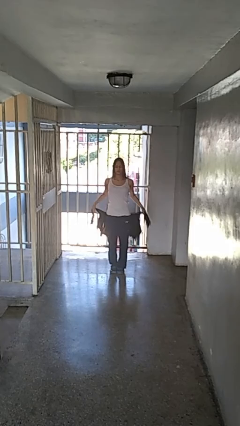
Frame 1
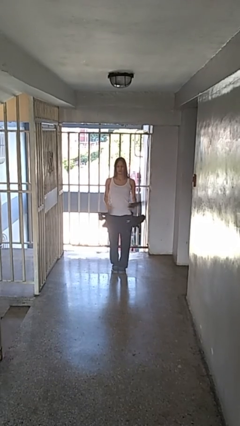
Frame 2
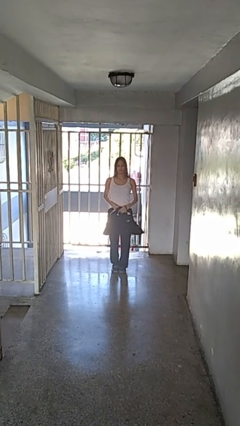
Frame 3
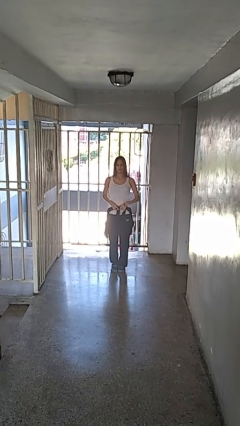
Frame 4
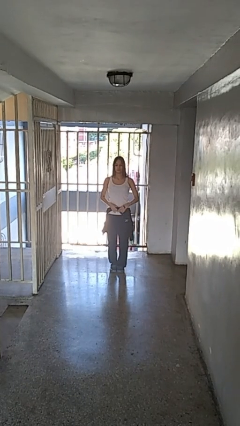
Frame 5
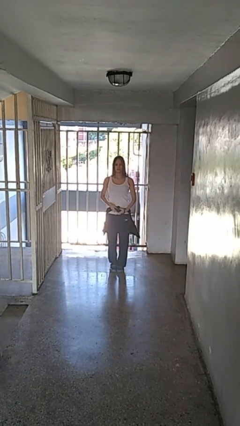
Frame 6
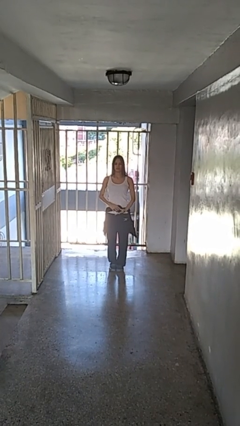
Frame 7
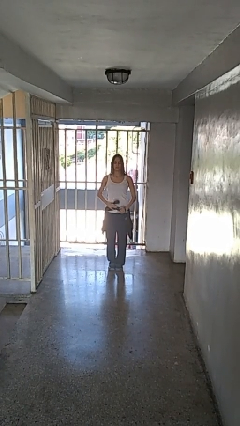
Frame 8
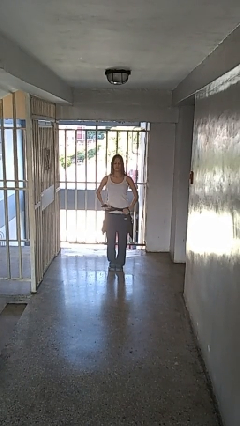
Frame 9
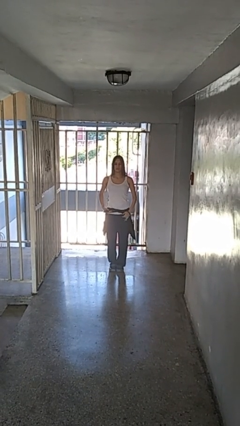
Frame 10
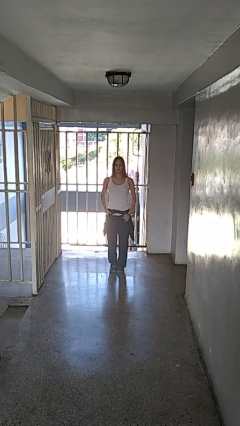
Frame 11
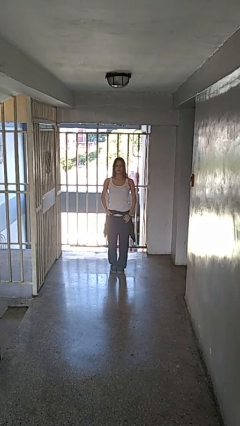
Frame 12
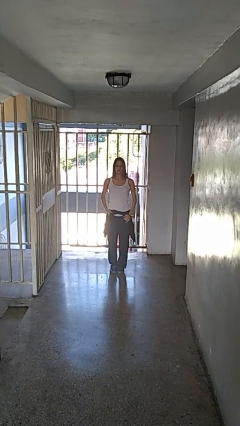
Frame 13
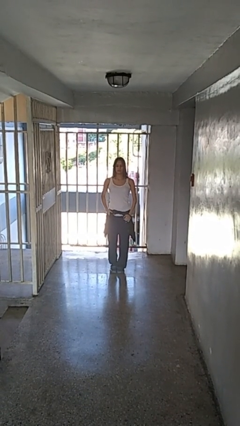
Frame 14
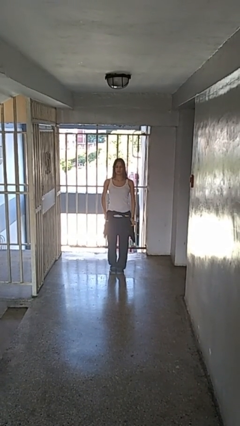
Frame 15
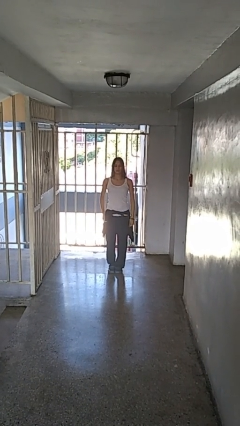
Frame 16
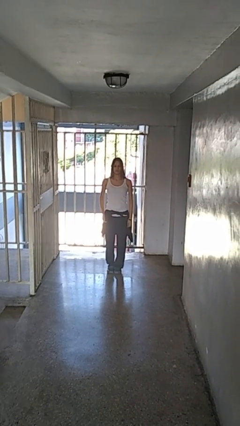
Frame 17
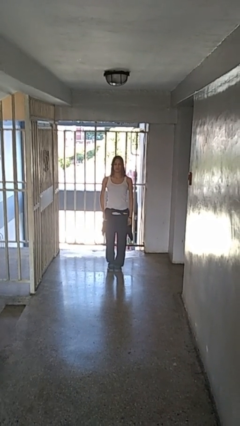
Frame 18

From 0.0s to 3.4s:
person ties jacket around waist

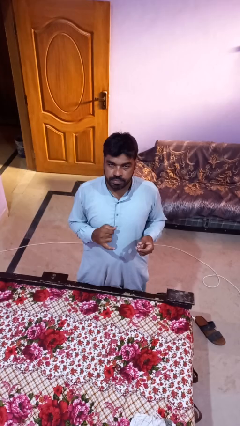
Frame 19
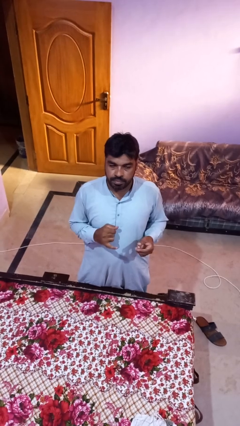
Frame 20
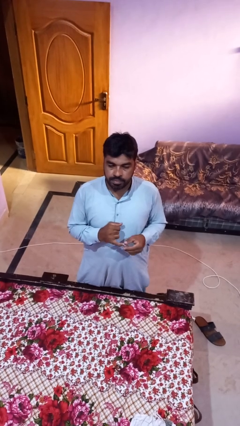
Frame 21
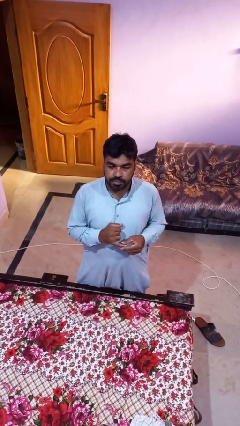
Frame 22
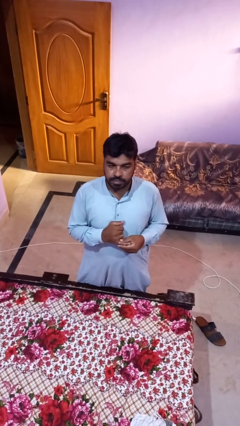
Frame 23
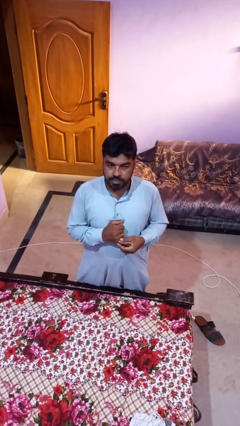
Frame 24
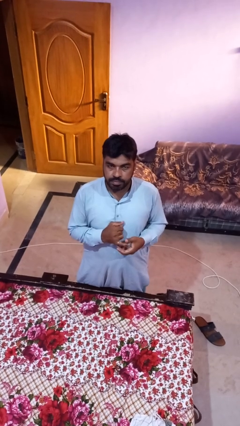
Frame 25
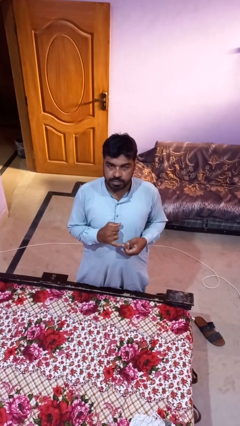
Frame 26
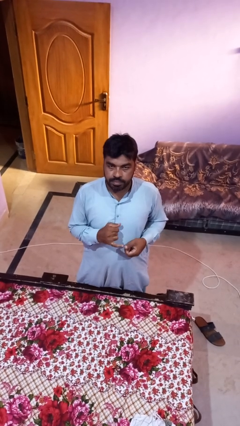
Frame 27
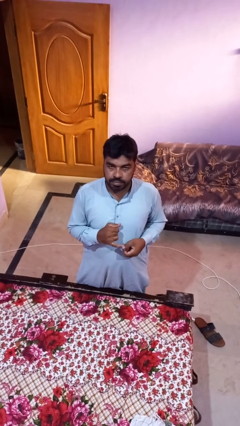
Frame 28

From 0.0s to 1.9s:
person puts on ring

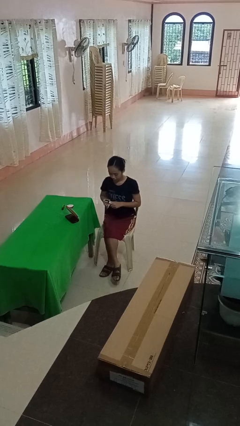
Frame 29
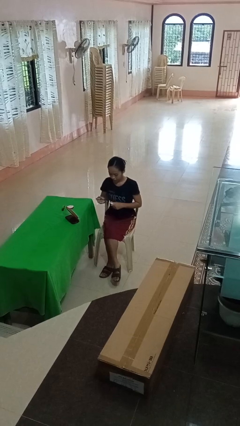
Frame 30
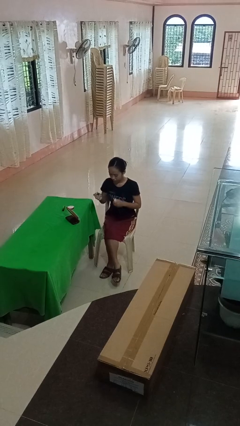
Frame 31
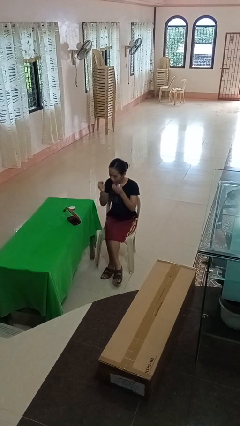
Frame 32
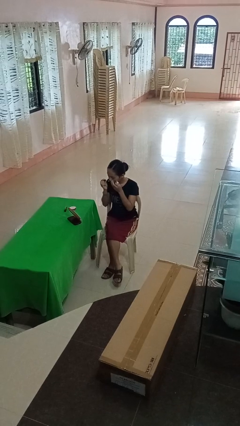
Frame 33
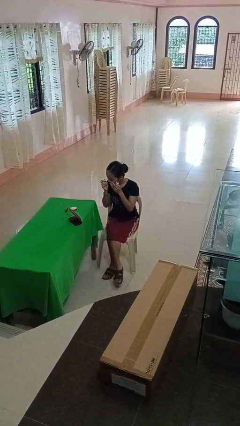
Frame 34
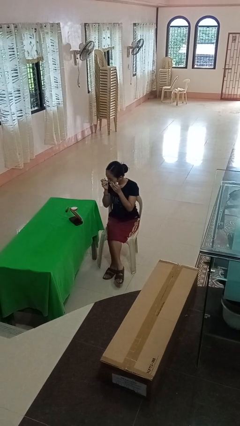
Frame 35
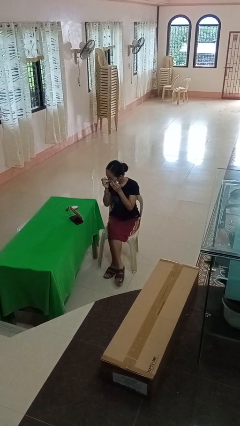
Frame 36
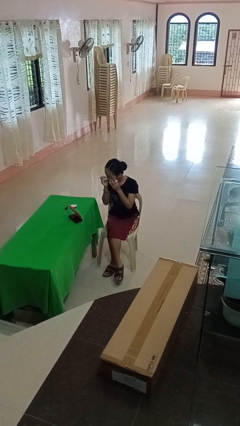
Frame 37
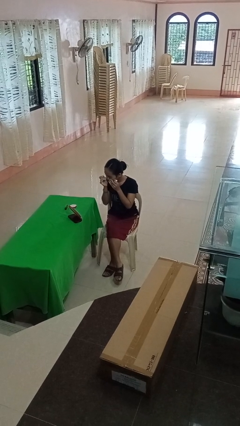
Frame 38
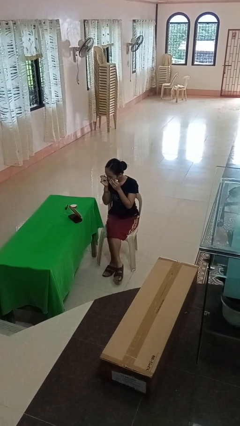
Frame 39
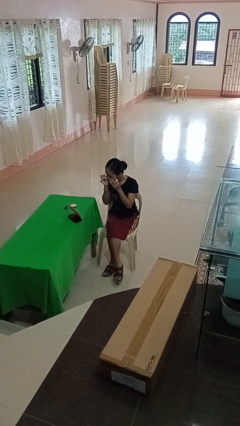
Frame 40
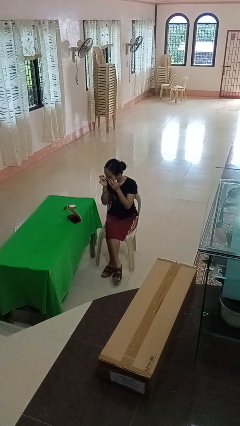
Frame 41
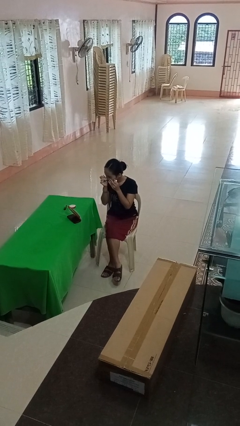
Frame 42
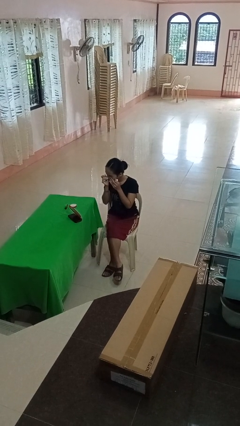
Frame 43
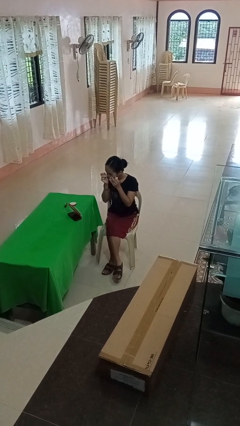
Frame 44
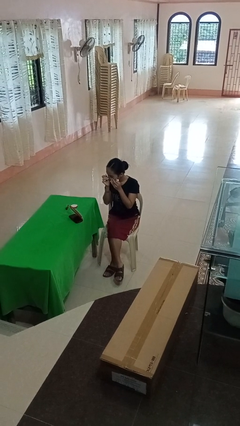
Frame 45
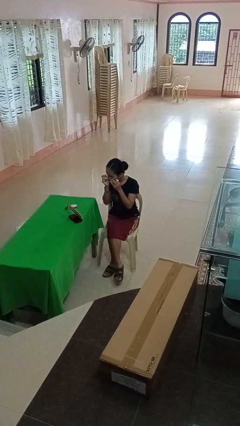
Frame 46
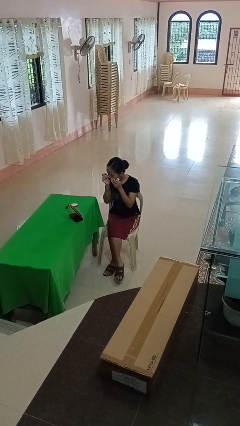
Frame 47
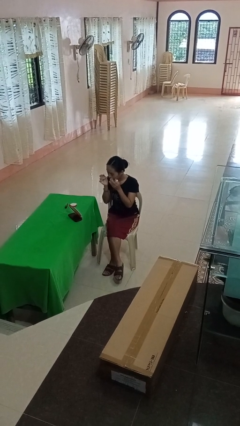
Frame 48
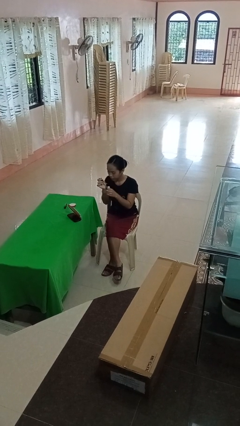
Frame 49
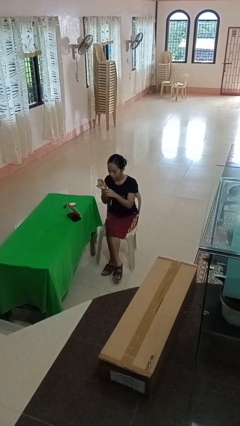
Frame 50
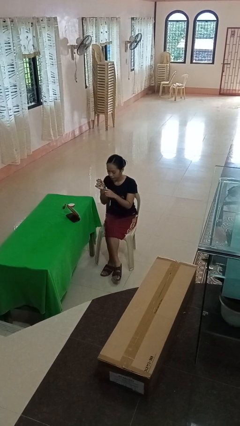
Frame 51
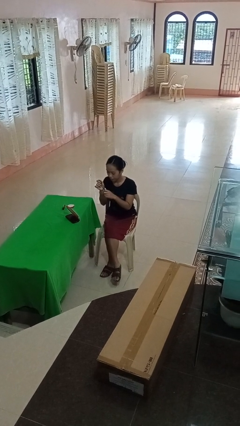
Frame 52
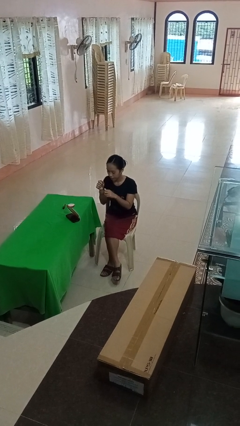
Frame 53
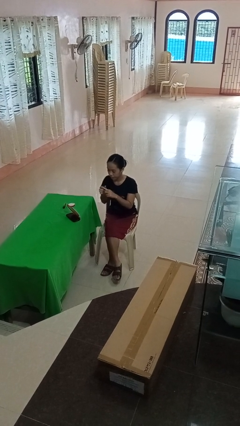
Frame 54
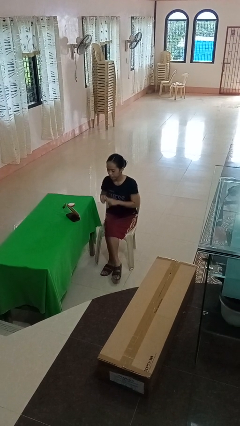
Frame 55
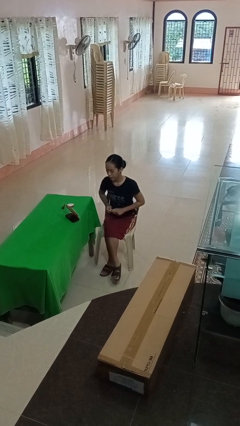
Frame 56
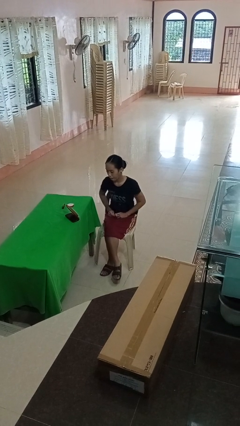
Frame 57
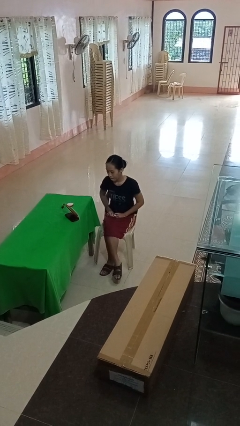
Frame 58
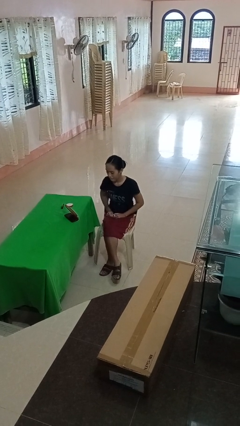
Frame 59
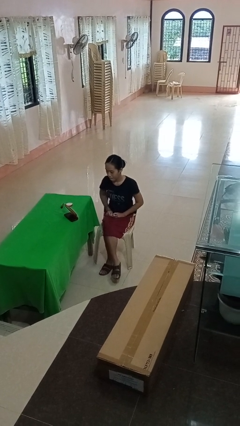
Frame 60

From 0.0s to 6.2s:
person applies eye makeup

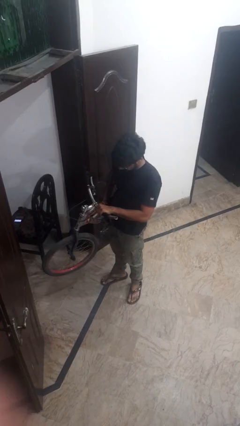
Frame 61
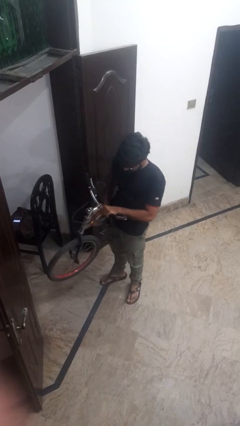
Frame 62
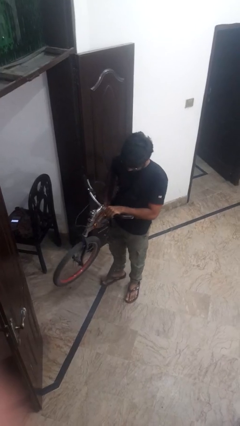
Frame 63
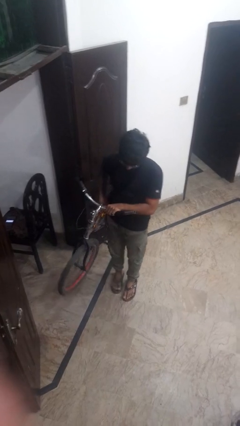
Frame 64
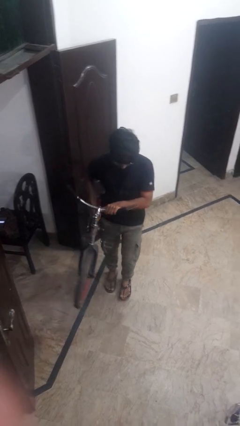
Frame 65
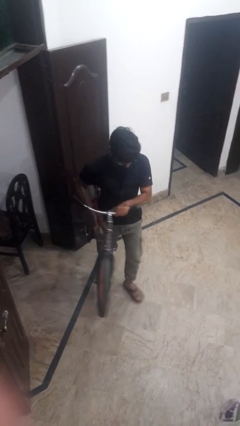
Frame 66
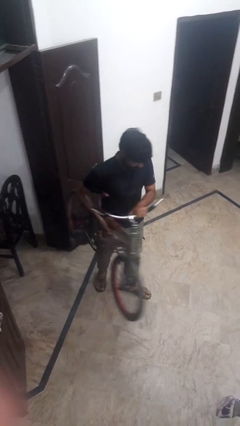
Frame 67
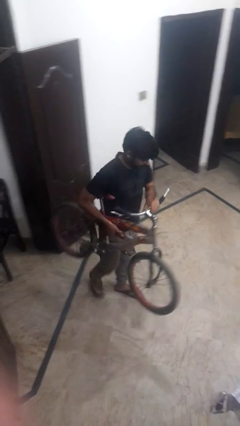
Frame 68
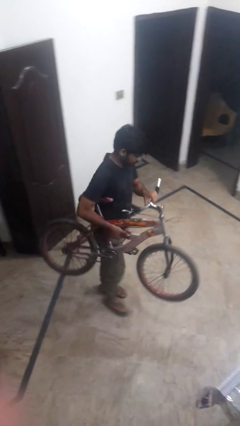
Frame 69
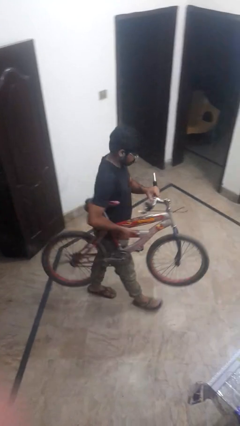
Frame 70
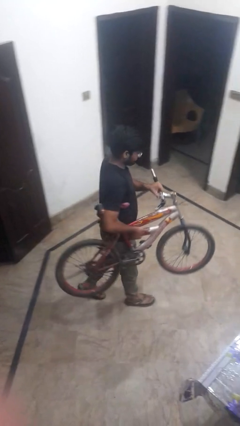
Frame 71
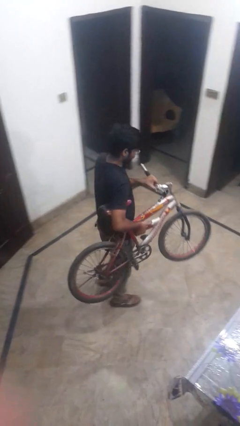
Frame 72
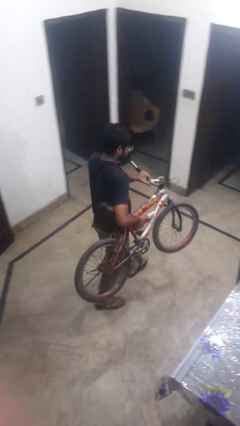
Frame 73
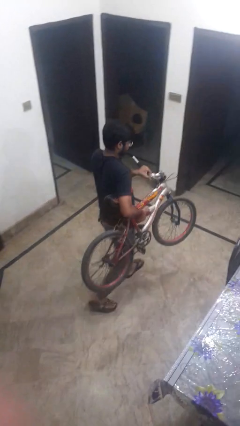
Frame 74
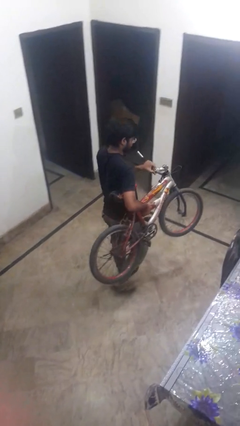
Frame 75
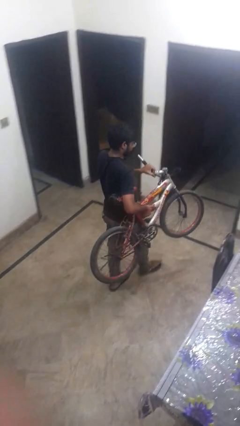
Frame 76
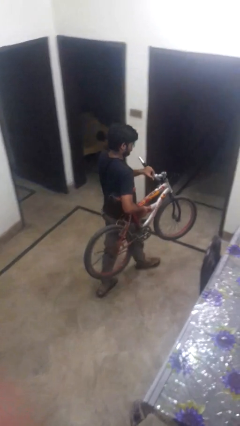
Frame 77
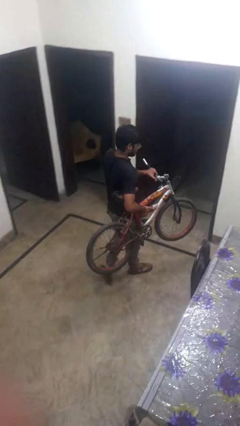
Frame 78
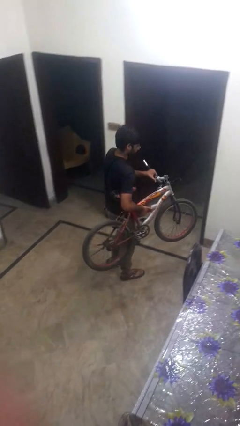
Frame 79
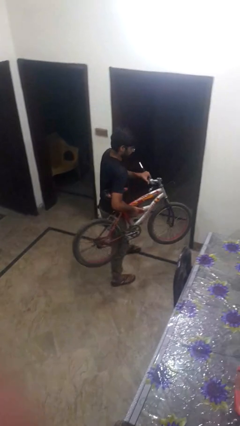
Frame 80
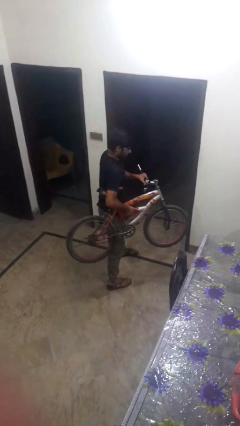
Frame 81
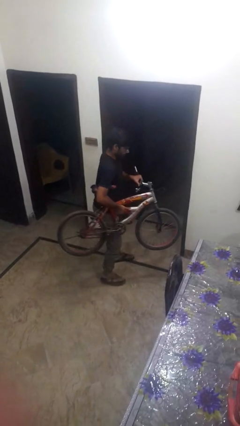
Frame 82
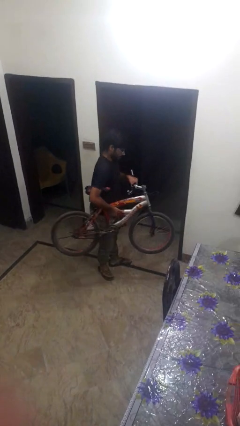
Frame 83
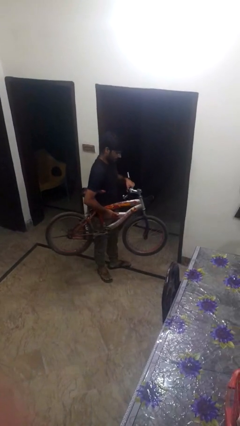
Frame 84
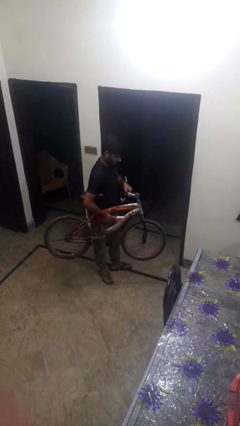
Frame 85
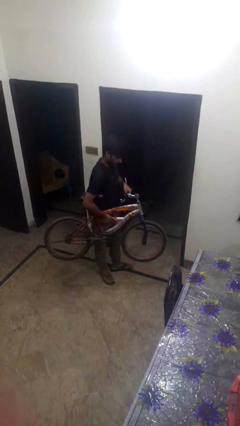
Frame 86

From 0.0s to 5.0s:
person carries bicycle

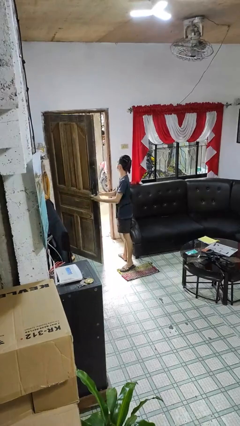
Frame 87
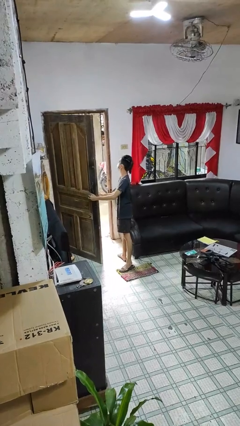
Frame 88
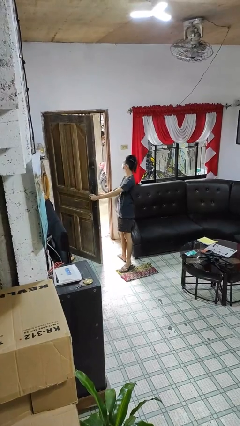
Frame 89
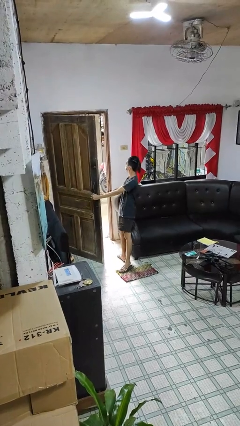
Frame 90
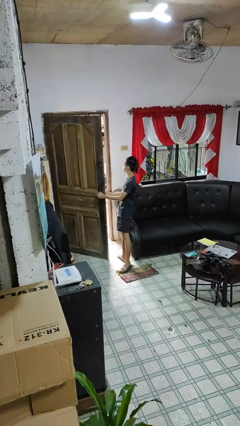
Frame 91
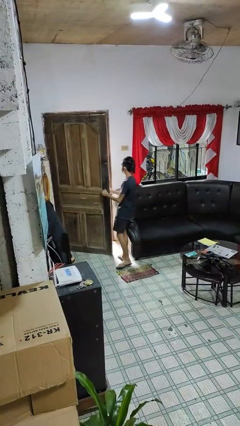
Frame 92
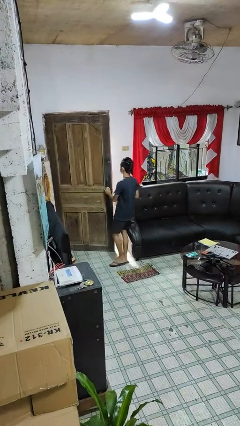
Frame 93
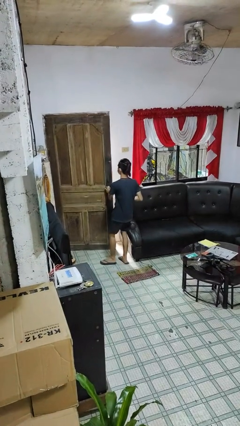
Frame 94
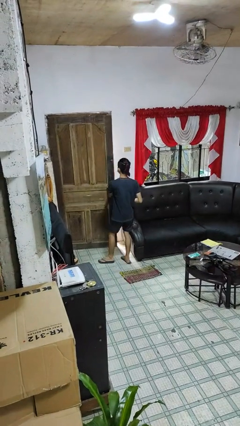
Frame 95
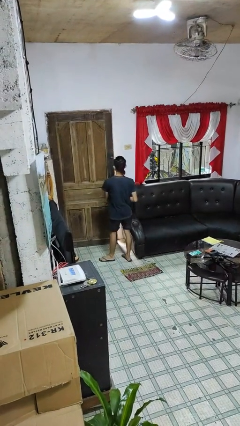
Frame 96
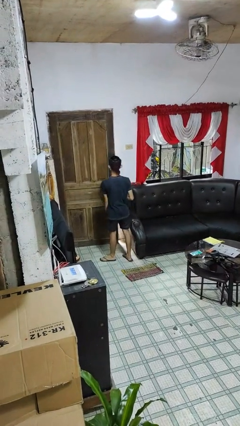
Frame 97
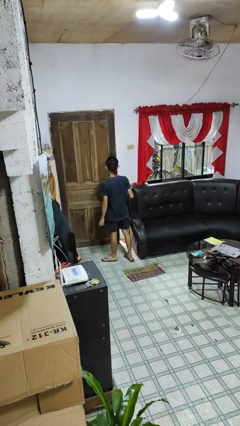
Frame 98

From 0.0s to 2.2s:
person closes facility door
